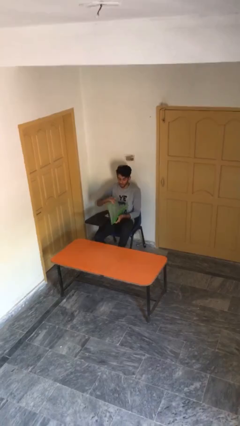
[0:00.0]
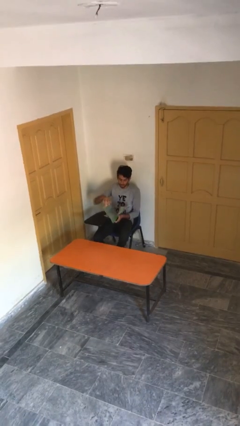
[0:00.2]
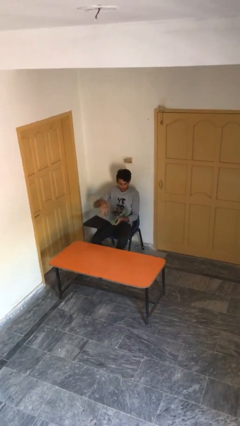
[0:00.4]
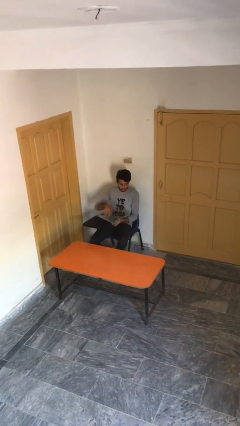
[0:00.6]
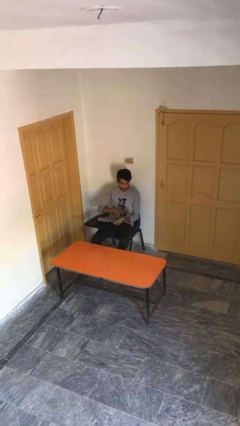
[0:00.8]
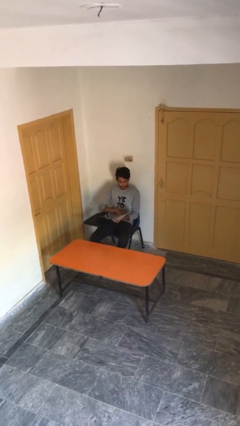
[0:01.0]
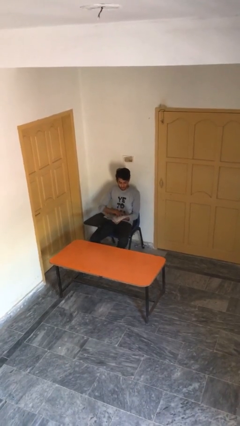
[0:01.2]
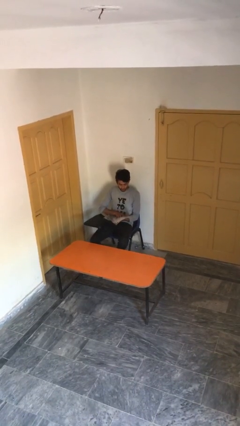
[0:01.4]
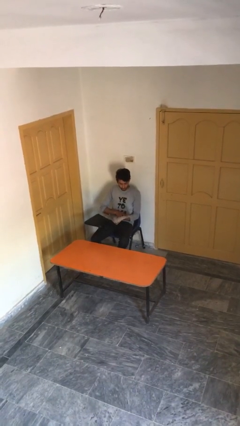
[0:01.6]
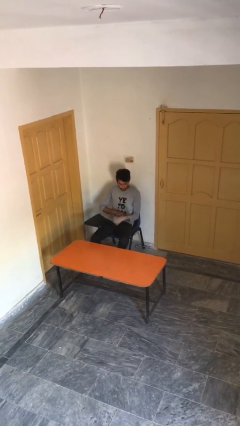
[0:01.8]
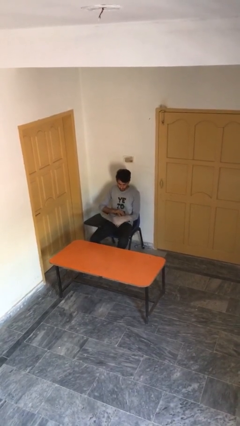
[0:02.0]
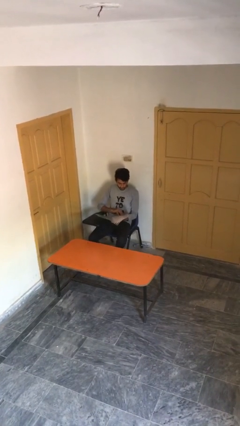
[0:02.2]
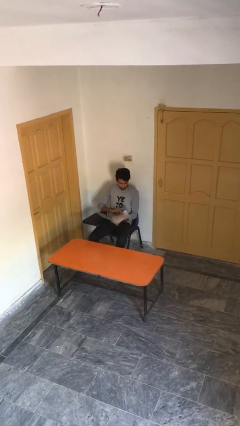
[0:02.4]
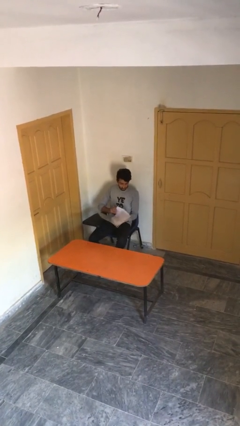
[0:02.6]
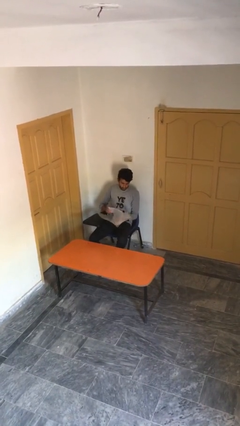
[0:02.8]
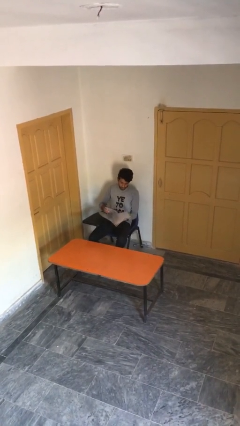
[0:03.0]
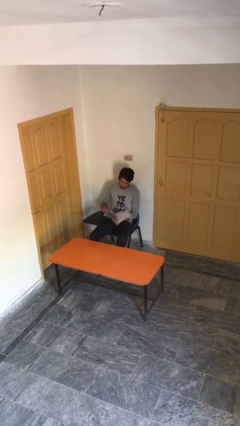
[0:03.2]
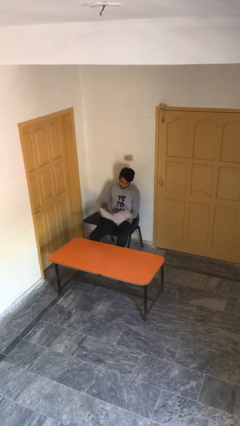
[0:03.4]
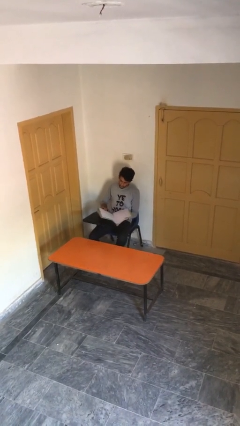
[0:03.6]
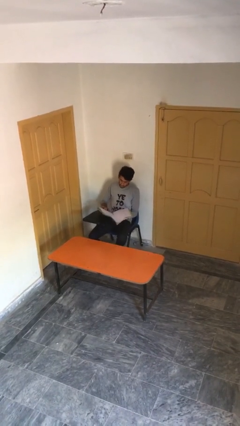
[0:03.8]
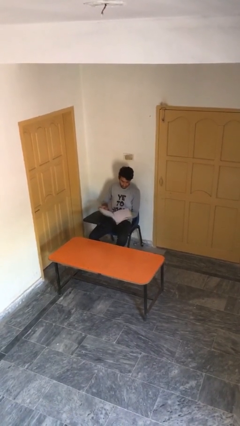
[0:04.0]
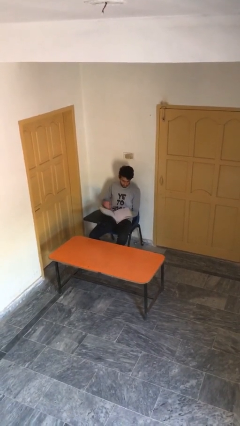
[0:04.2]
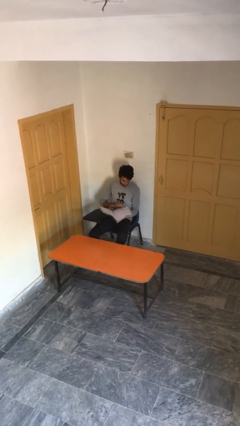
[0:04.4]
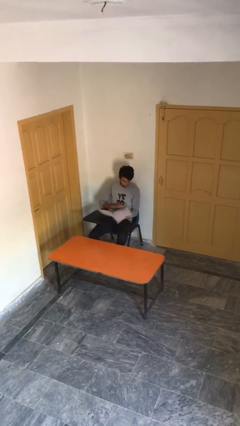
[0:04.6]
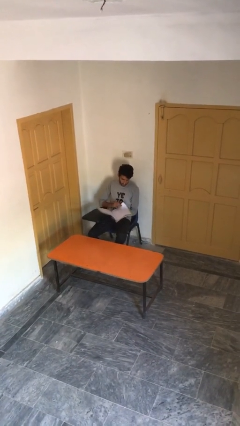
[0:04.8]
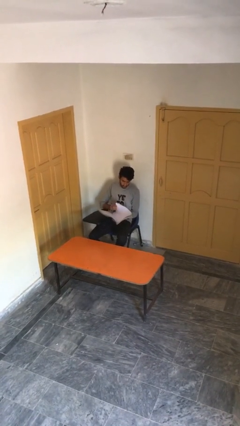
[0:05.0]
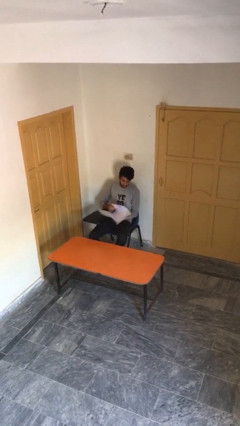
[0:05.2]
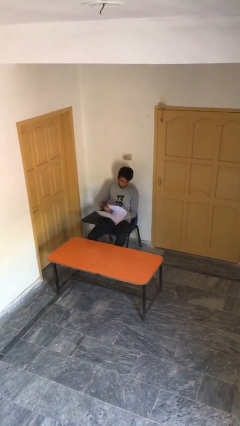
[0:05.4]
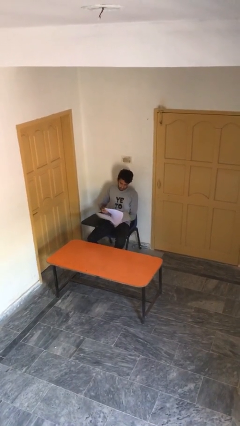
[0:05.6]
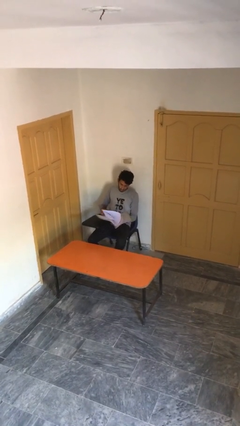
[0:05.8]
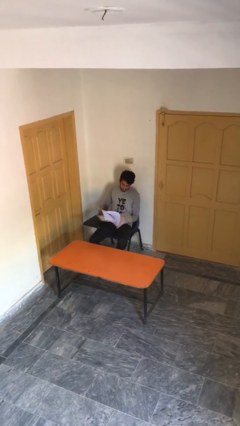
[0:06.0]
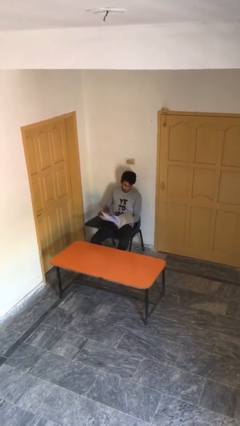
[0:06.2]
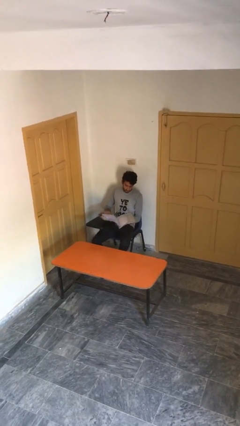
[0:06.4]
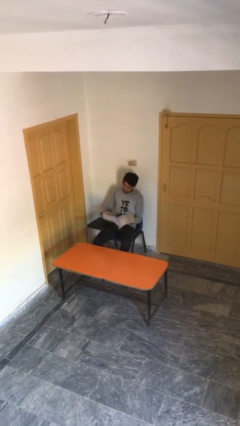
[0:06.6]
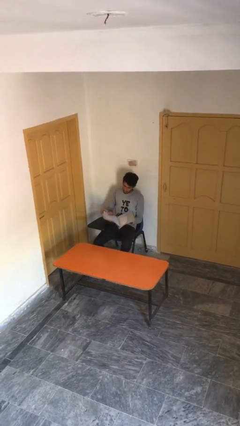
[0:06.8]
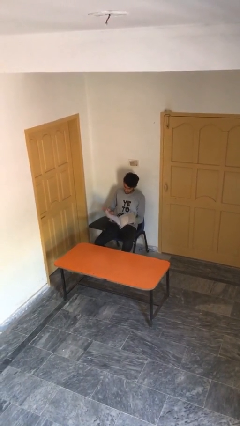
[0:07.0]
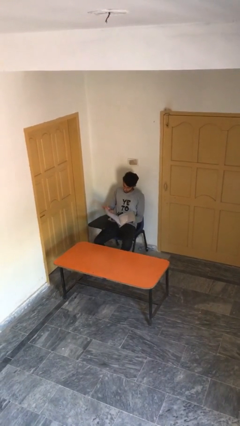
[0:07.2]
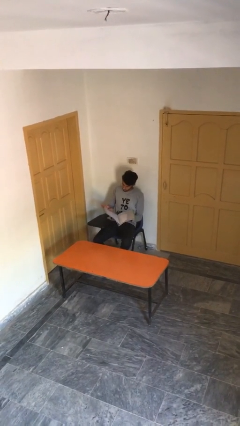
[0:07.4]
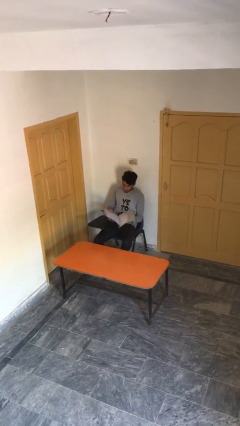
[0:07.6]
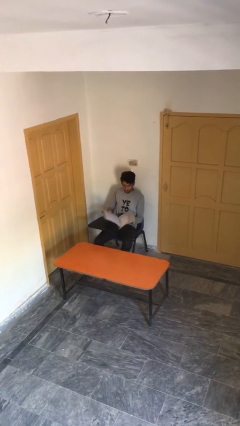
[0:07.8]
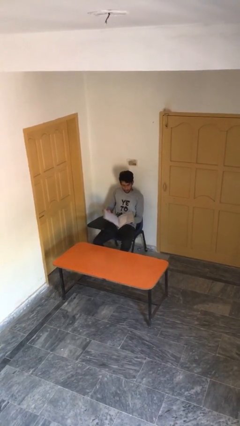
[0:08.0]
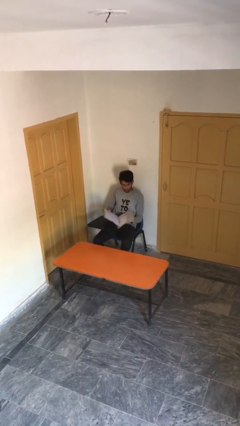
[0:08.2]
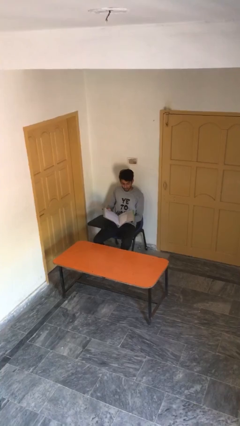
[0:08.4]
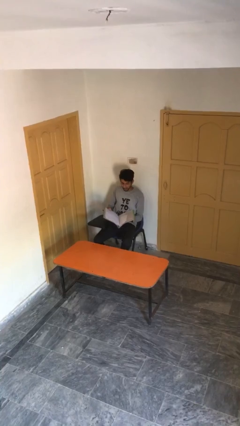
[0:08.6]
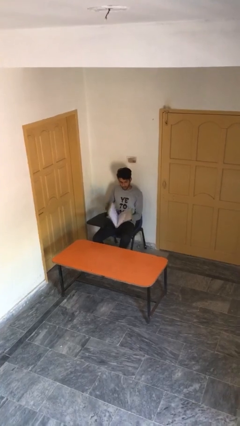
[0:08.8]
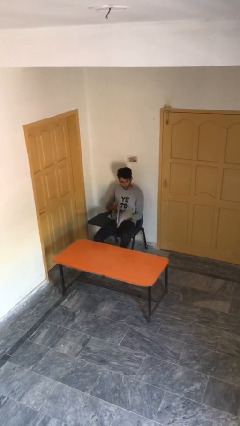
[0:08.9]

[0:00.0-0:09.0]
person reads document

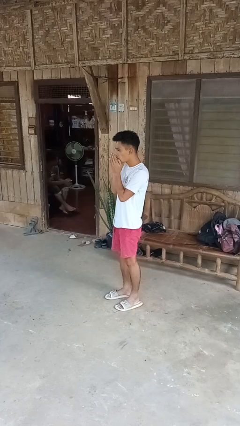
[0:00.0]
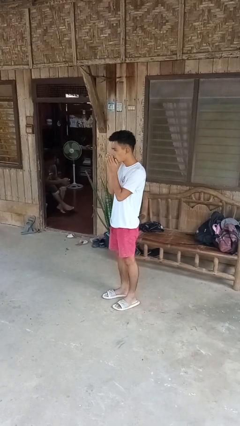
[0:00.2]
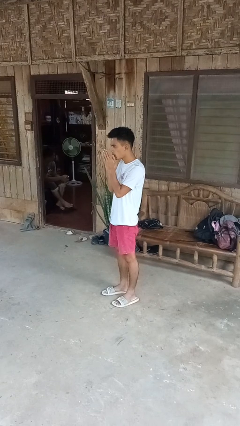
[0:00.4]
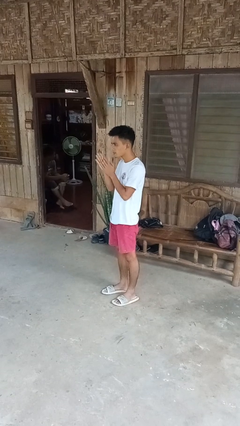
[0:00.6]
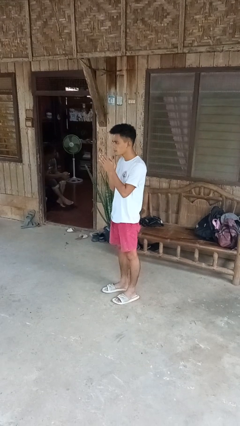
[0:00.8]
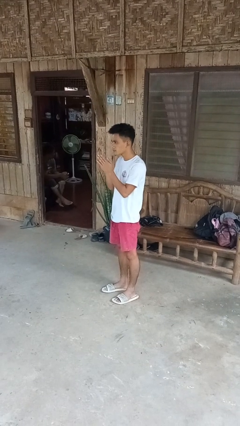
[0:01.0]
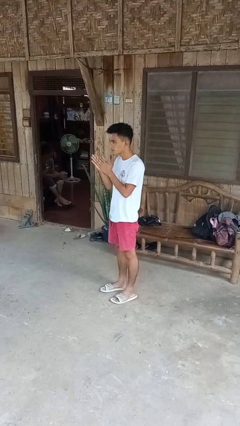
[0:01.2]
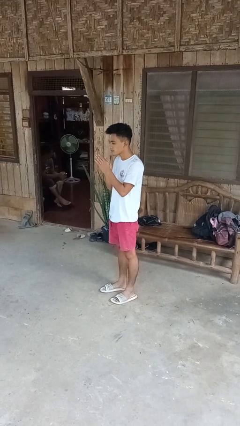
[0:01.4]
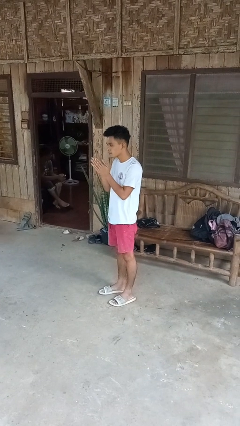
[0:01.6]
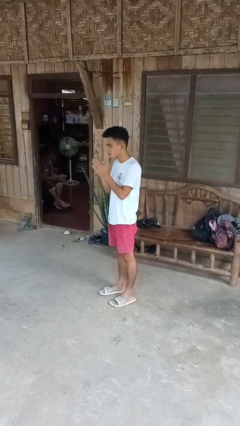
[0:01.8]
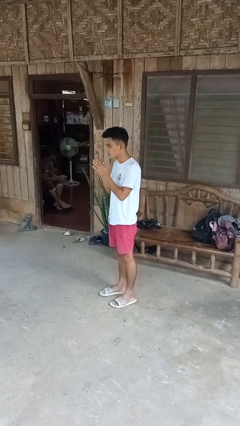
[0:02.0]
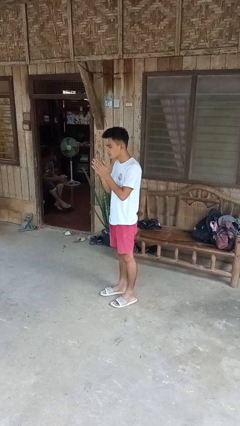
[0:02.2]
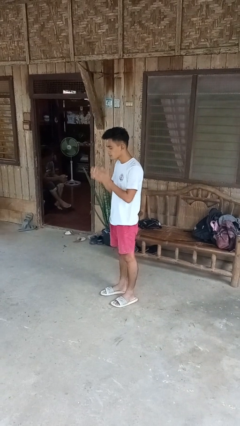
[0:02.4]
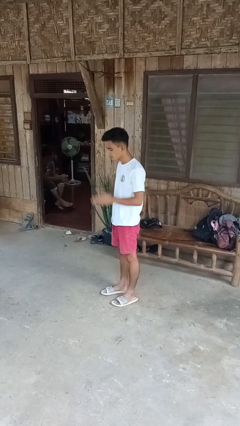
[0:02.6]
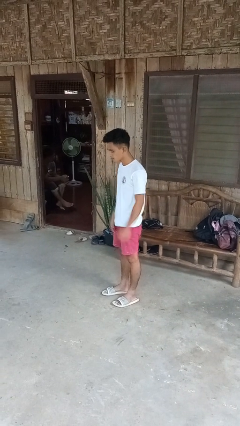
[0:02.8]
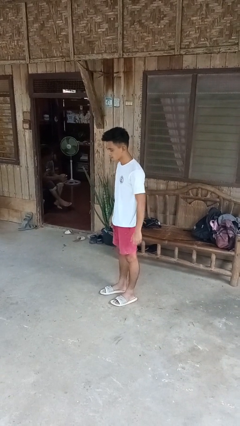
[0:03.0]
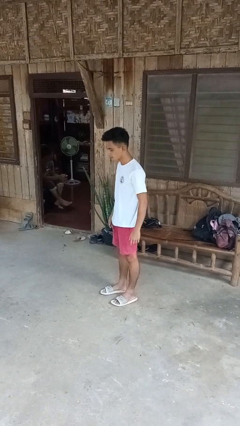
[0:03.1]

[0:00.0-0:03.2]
person blows into hands

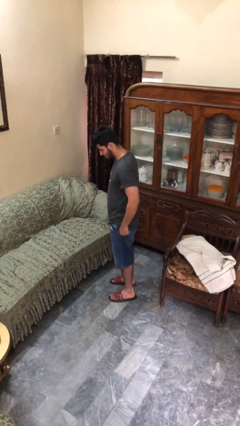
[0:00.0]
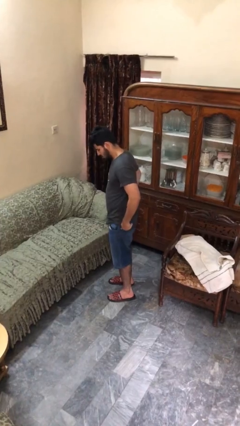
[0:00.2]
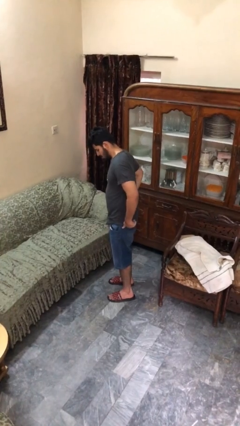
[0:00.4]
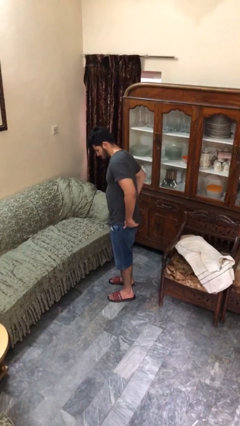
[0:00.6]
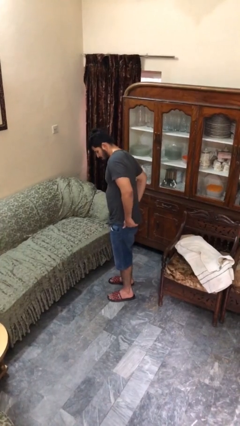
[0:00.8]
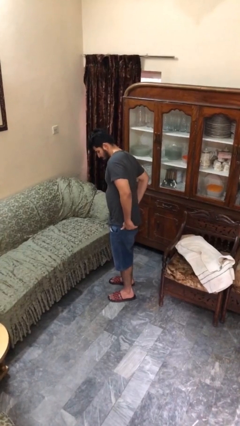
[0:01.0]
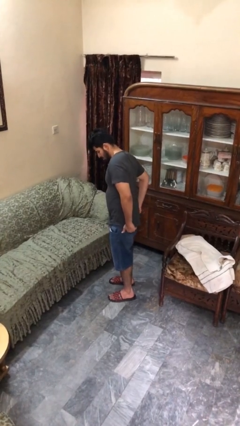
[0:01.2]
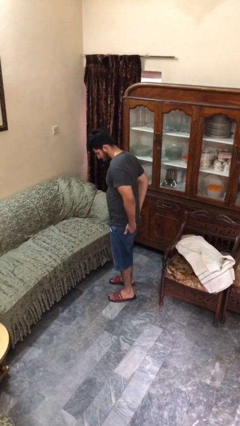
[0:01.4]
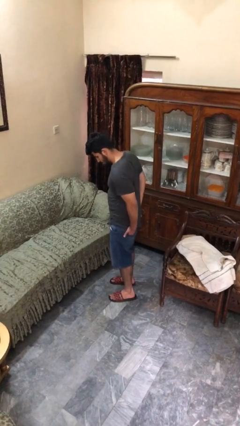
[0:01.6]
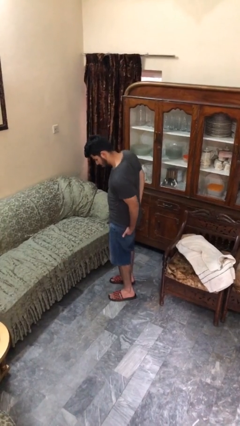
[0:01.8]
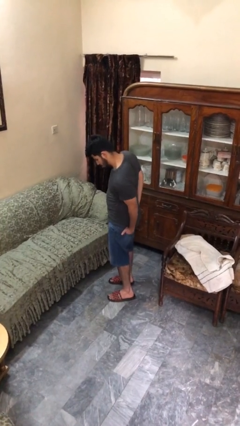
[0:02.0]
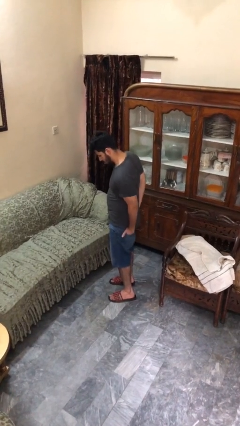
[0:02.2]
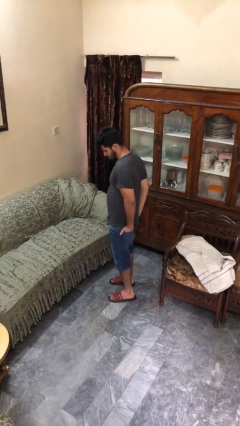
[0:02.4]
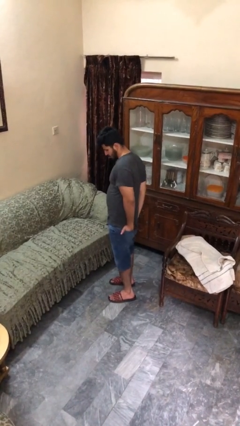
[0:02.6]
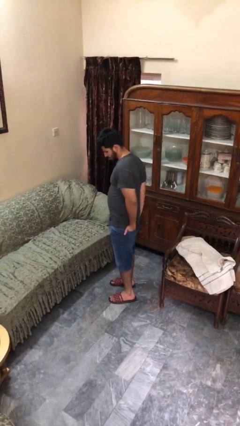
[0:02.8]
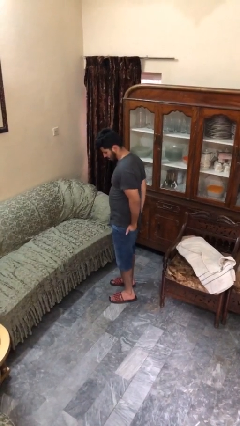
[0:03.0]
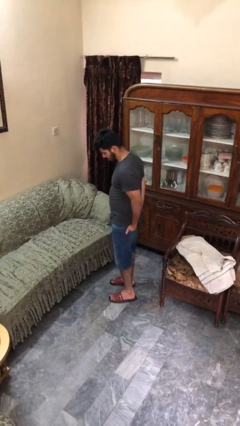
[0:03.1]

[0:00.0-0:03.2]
person puts hands in back pockets

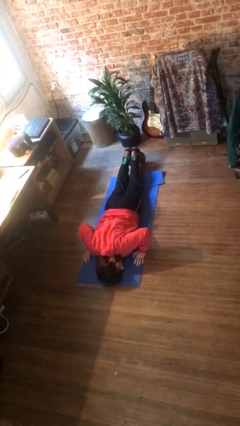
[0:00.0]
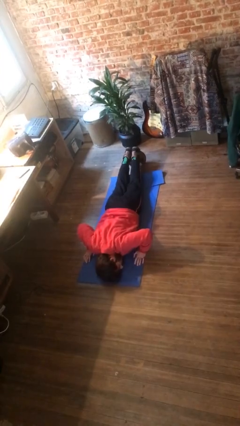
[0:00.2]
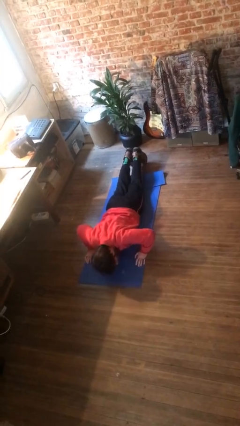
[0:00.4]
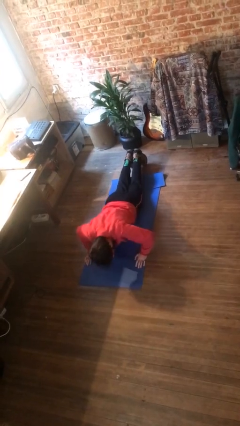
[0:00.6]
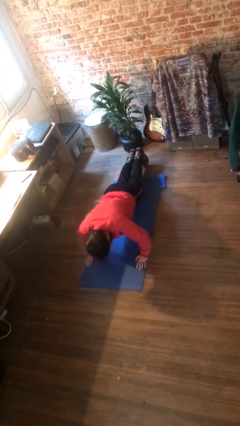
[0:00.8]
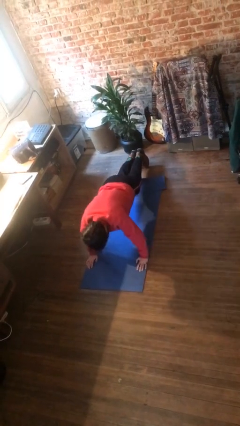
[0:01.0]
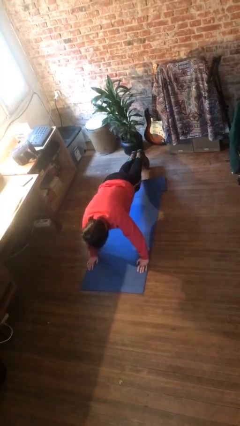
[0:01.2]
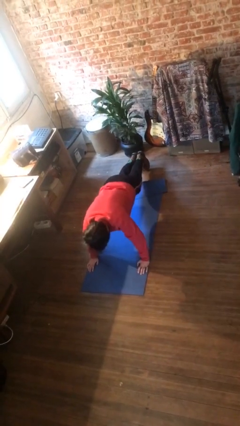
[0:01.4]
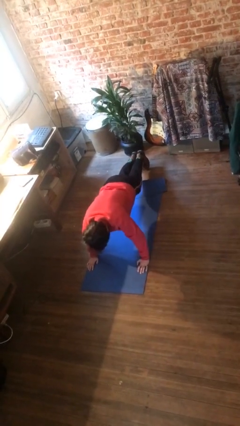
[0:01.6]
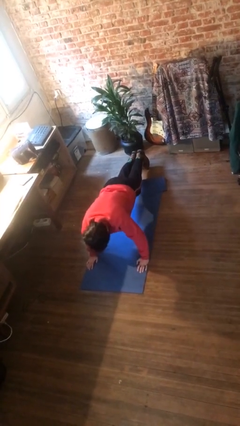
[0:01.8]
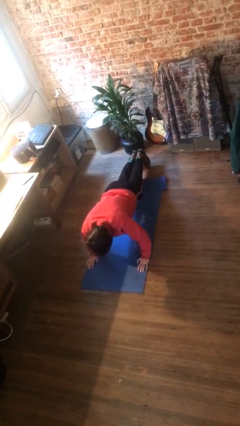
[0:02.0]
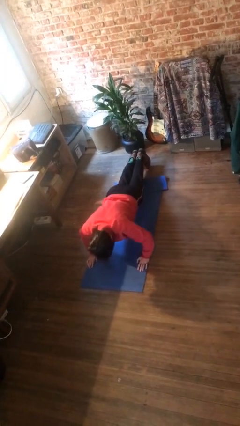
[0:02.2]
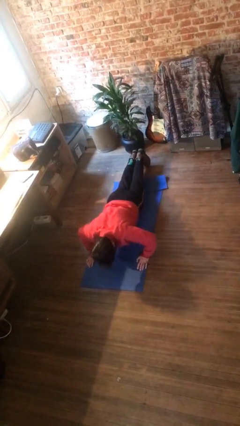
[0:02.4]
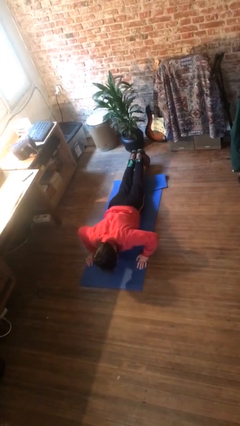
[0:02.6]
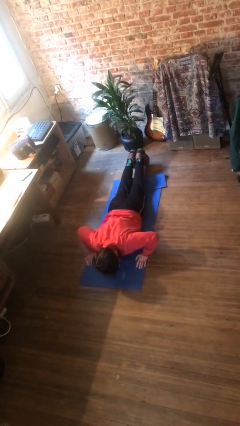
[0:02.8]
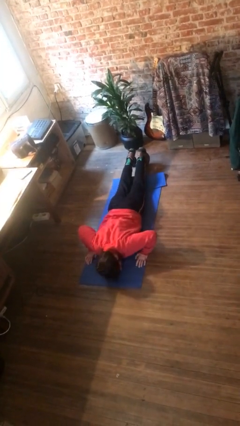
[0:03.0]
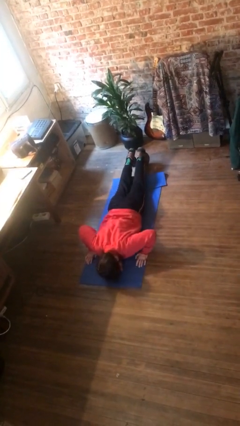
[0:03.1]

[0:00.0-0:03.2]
person exercises with pushup
